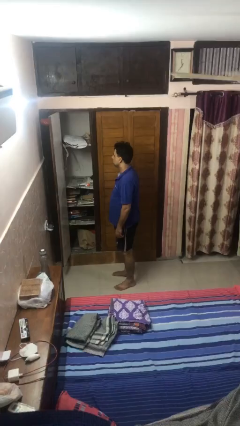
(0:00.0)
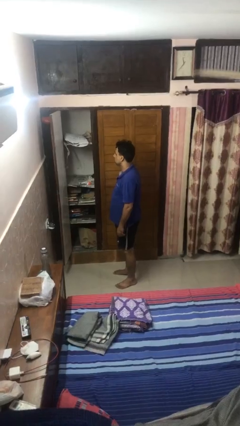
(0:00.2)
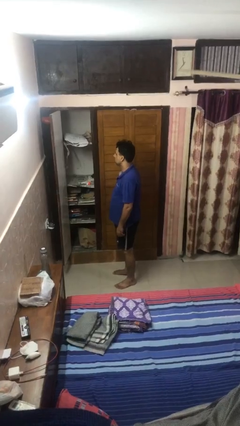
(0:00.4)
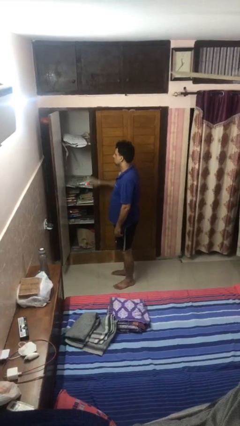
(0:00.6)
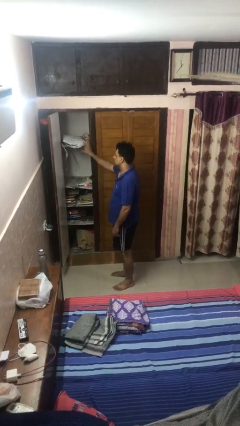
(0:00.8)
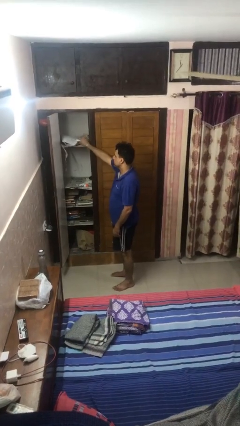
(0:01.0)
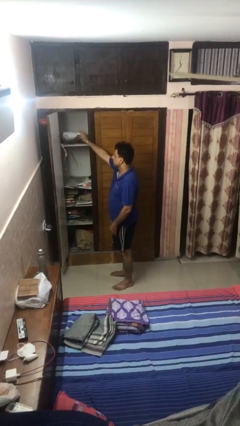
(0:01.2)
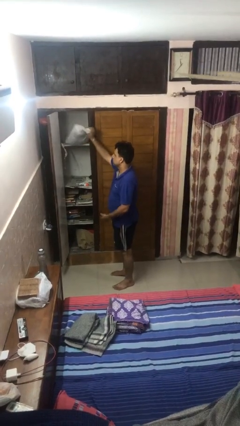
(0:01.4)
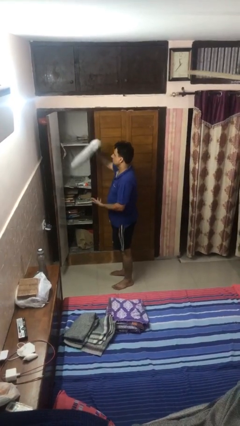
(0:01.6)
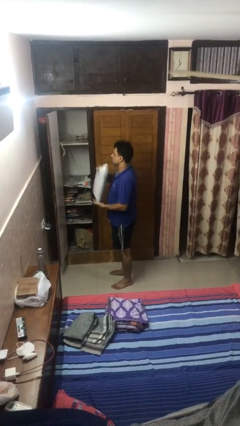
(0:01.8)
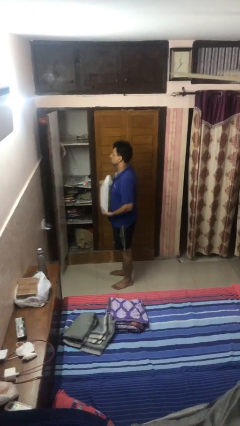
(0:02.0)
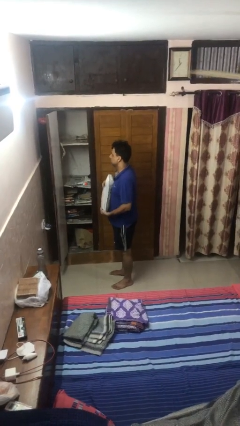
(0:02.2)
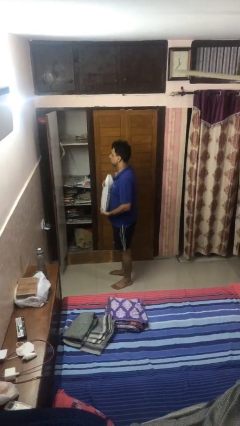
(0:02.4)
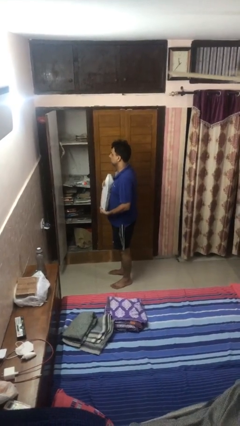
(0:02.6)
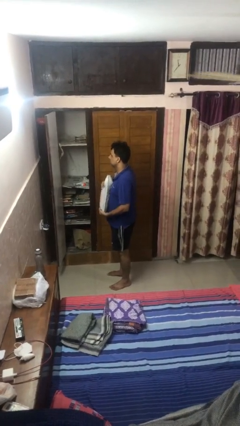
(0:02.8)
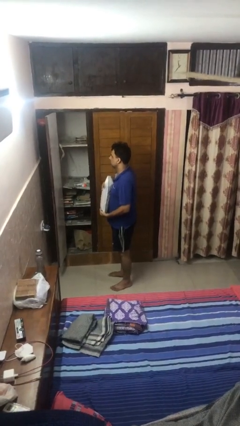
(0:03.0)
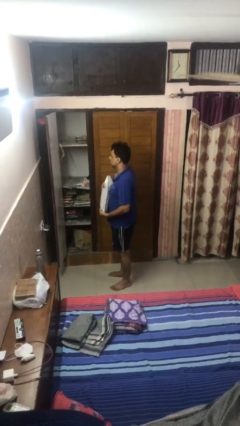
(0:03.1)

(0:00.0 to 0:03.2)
person picks up object from shelf

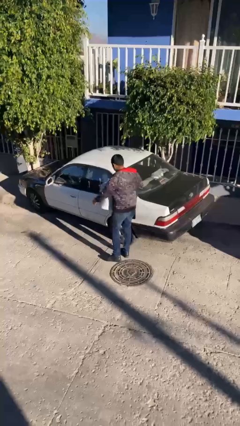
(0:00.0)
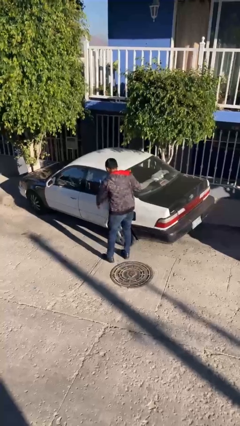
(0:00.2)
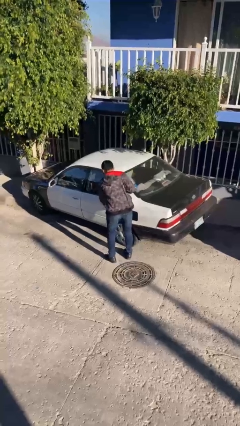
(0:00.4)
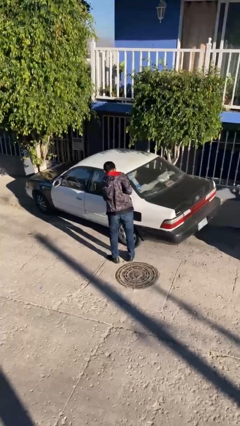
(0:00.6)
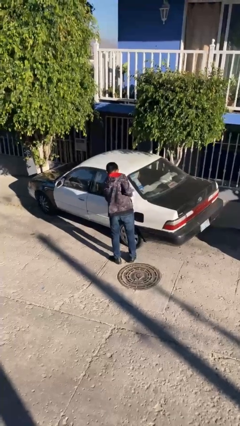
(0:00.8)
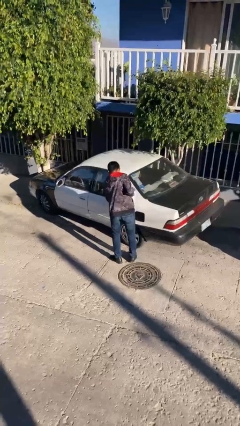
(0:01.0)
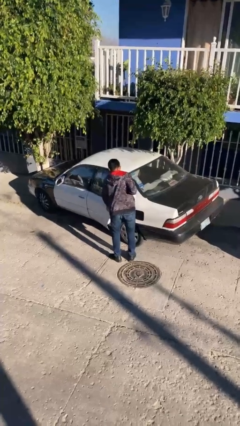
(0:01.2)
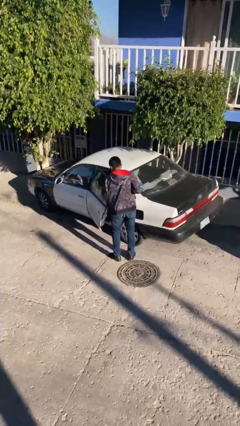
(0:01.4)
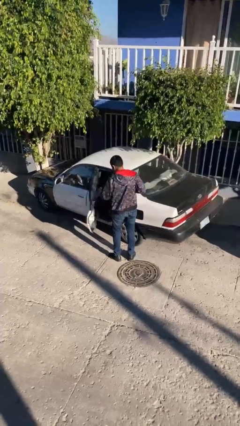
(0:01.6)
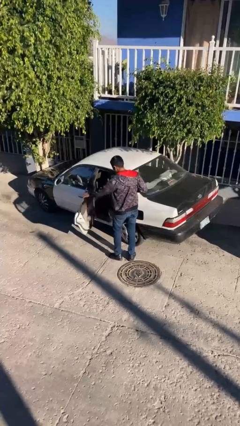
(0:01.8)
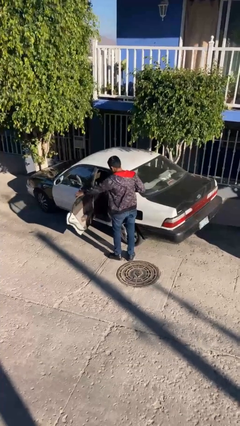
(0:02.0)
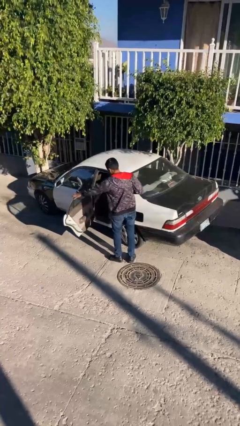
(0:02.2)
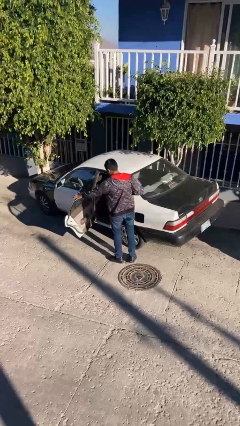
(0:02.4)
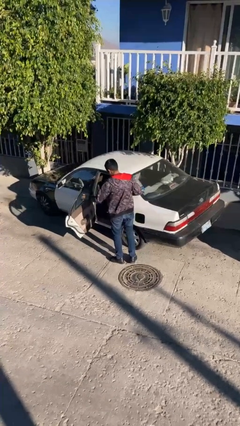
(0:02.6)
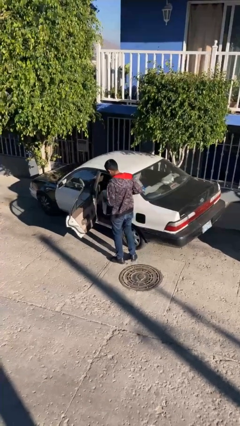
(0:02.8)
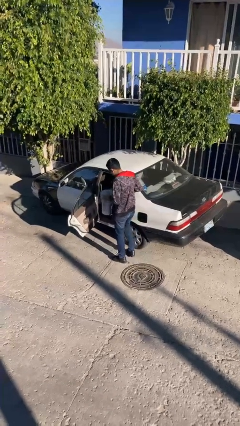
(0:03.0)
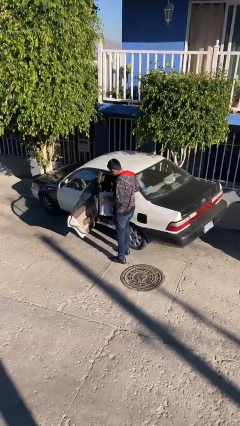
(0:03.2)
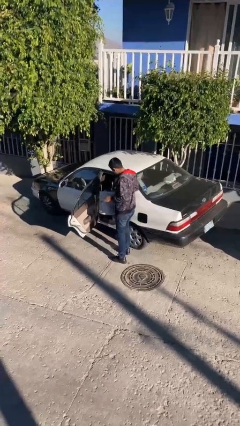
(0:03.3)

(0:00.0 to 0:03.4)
person opens car door

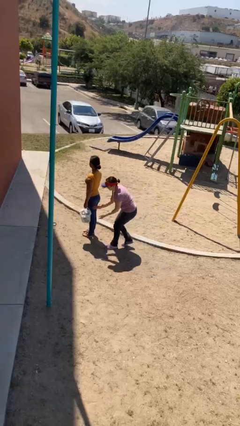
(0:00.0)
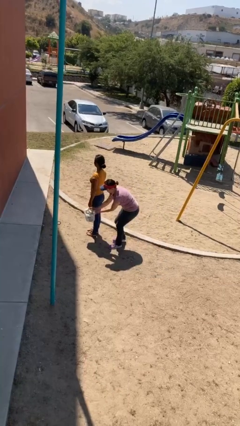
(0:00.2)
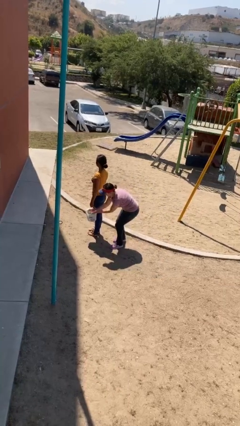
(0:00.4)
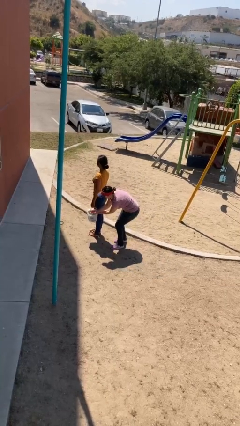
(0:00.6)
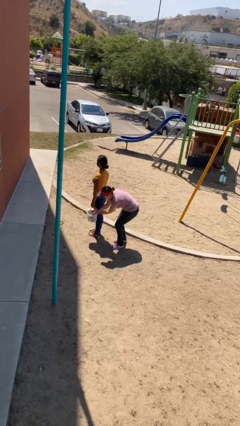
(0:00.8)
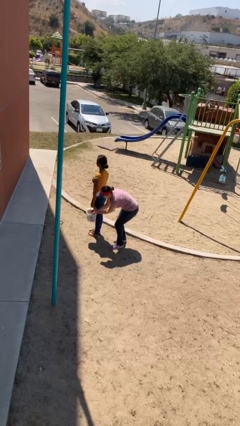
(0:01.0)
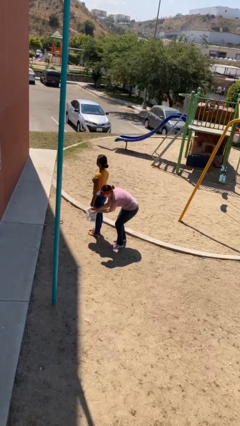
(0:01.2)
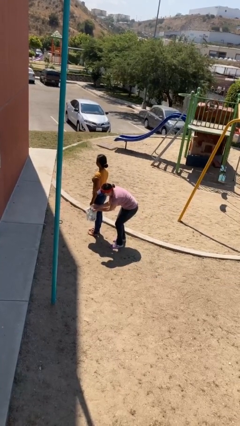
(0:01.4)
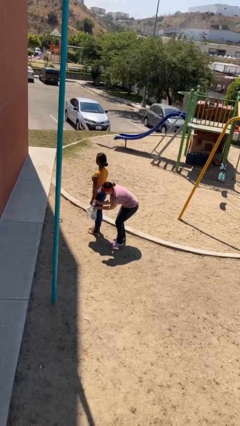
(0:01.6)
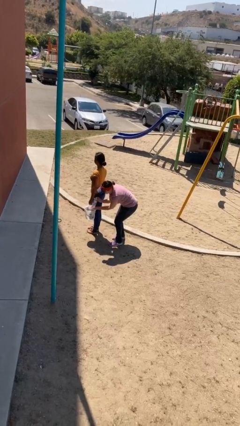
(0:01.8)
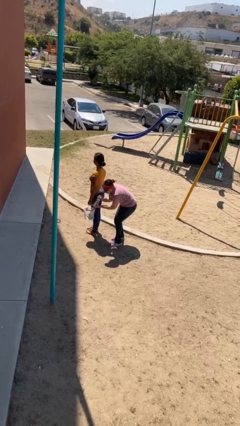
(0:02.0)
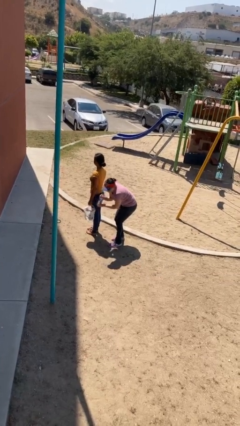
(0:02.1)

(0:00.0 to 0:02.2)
person steals object from person

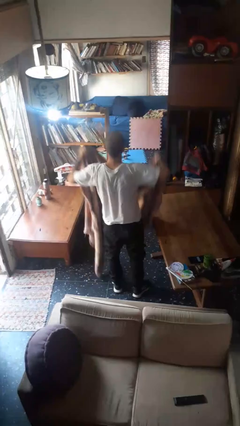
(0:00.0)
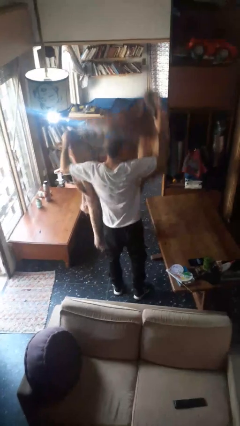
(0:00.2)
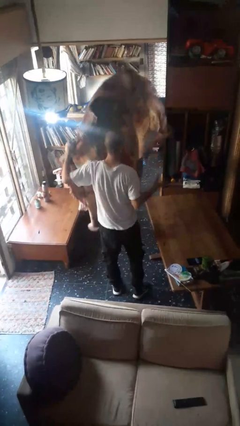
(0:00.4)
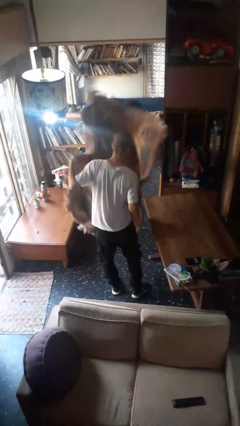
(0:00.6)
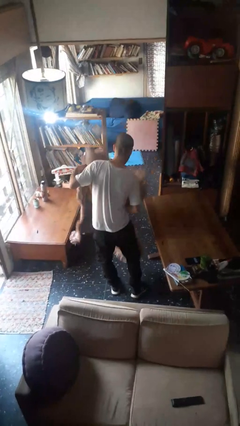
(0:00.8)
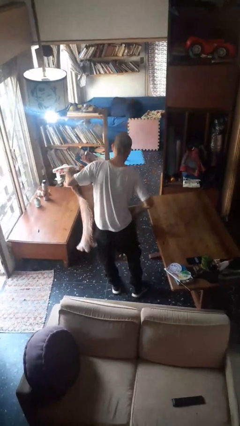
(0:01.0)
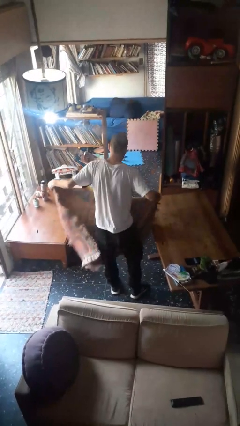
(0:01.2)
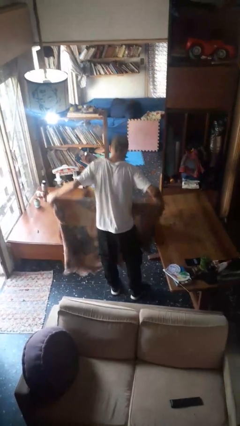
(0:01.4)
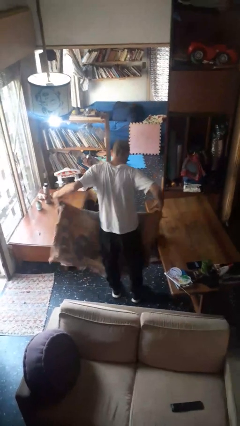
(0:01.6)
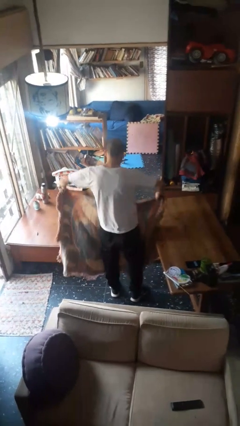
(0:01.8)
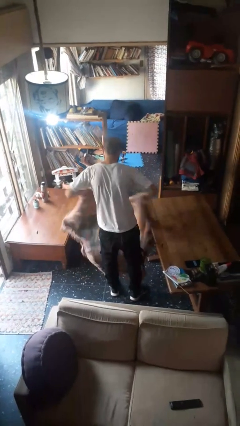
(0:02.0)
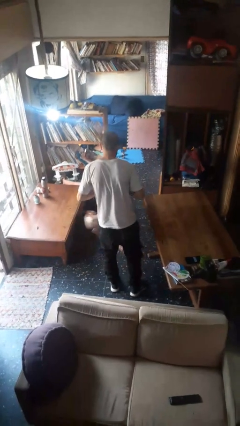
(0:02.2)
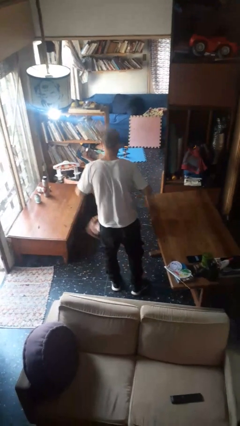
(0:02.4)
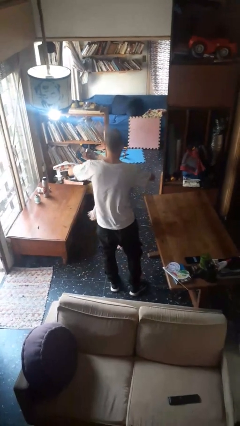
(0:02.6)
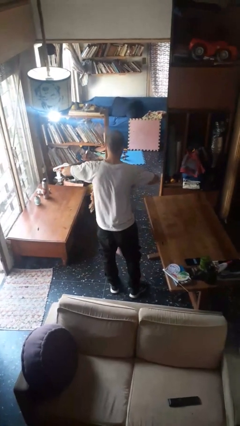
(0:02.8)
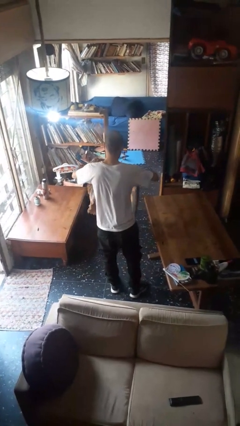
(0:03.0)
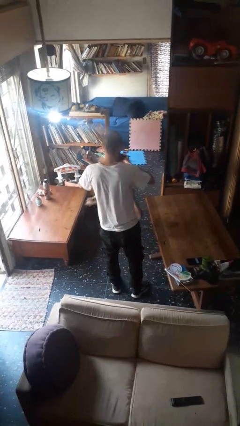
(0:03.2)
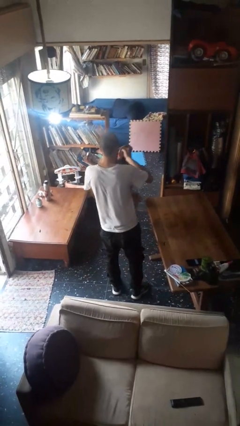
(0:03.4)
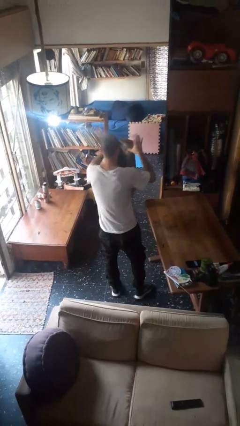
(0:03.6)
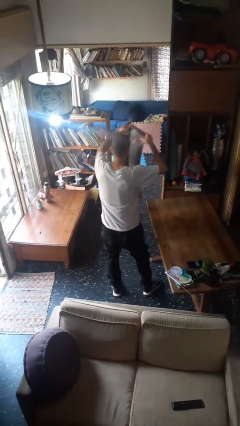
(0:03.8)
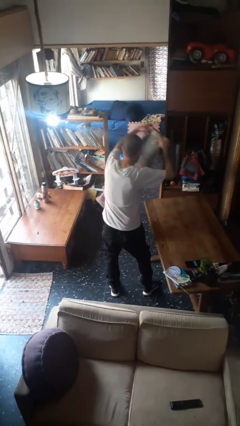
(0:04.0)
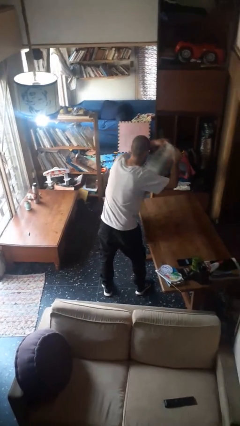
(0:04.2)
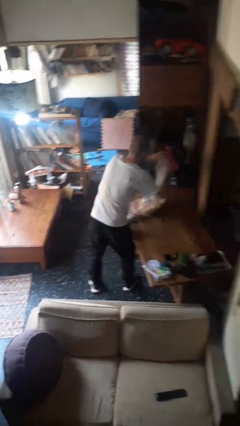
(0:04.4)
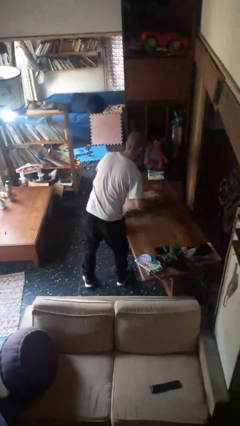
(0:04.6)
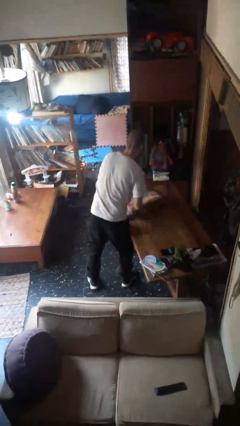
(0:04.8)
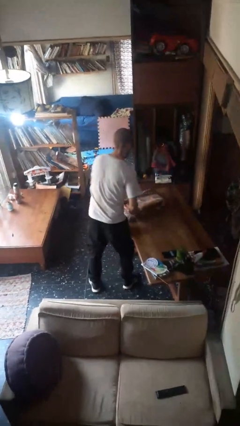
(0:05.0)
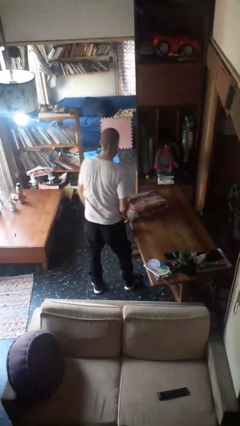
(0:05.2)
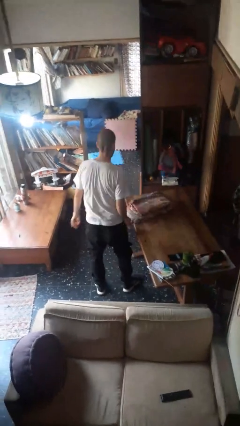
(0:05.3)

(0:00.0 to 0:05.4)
person folds blanket

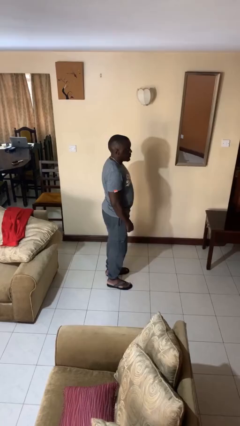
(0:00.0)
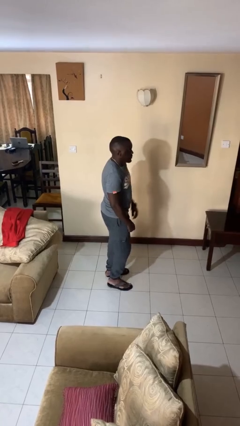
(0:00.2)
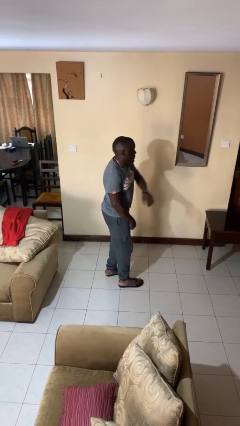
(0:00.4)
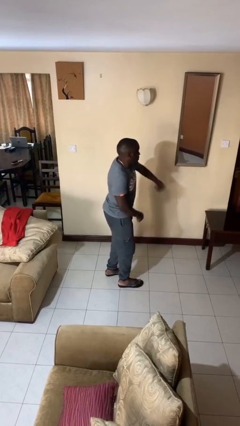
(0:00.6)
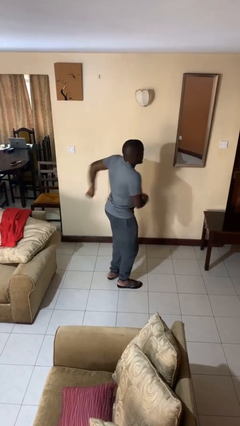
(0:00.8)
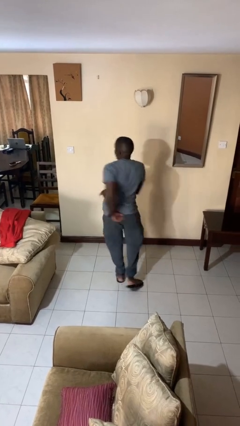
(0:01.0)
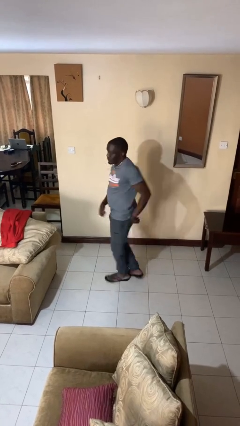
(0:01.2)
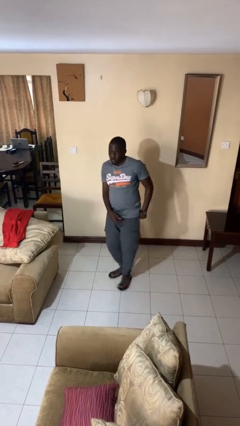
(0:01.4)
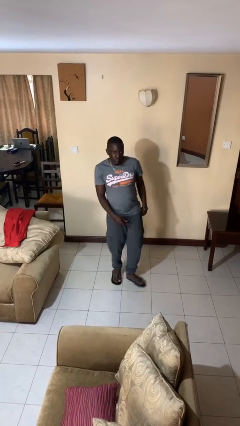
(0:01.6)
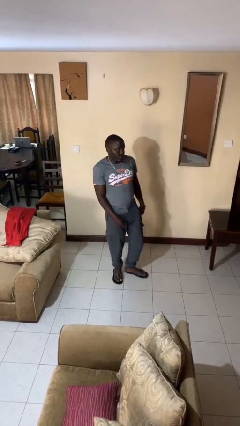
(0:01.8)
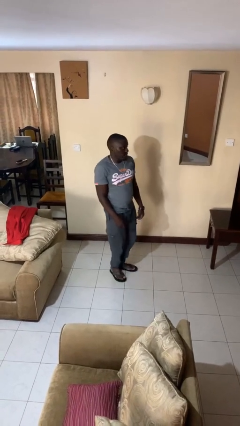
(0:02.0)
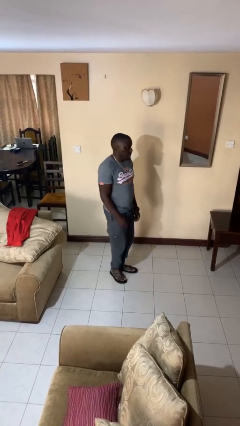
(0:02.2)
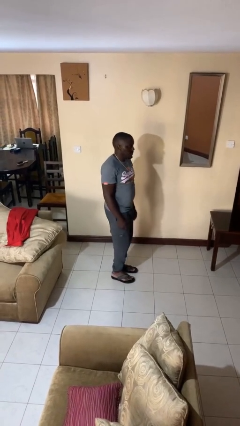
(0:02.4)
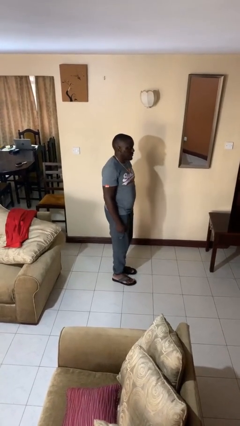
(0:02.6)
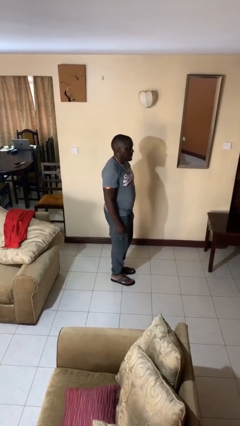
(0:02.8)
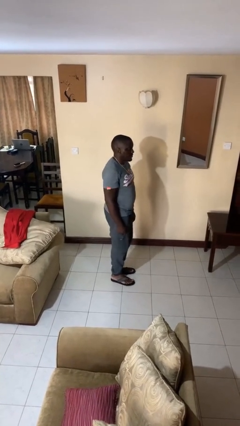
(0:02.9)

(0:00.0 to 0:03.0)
person twirls
